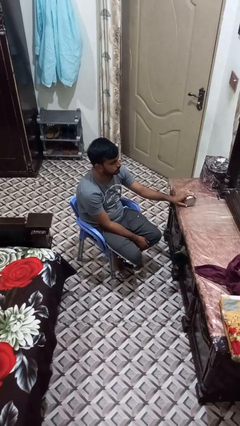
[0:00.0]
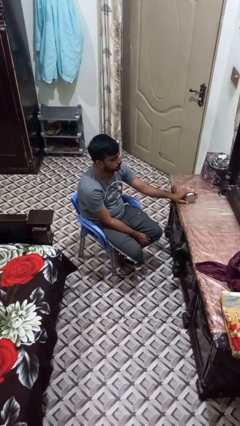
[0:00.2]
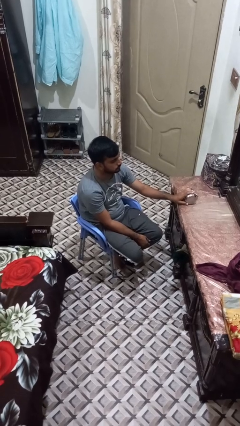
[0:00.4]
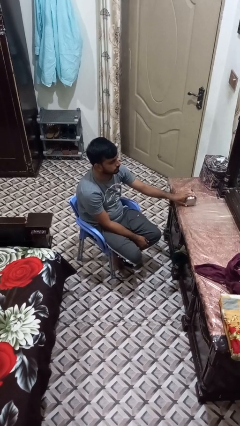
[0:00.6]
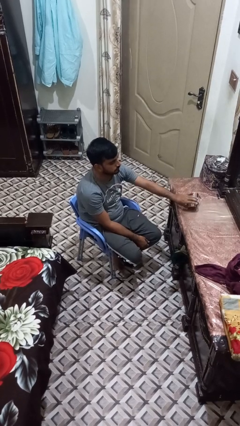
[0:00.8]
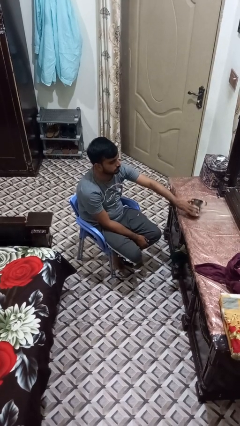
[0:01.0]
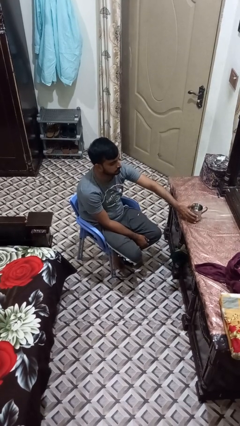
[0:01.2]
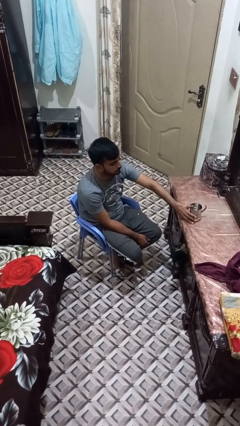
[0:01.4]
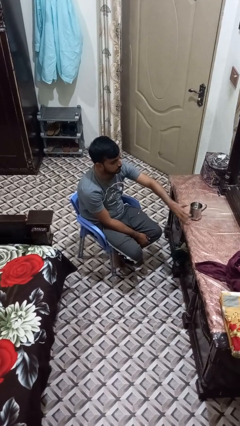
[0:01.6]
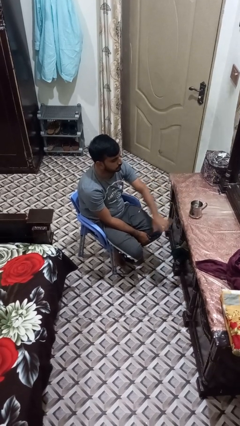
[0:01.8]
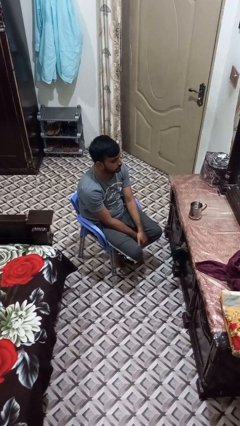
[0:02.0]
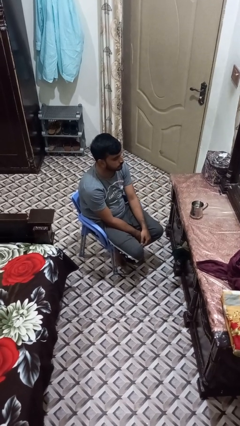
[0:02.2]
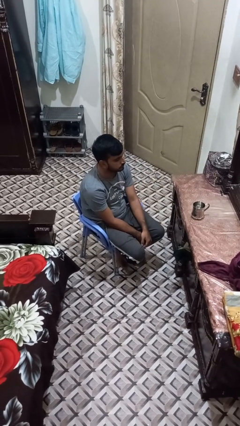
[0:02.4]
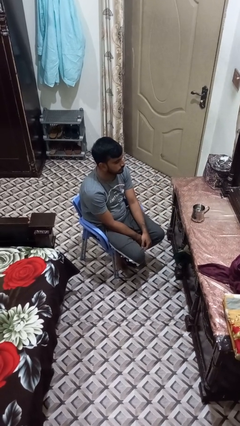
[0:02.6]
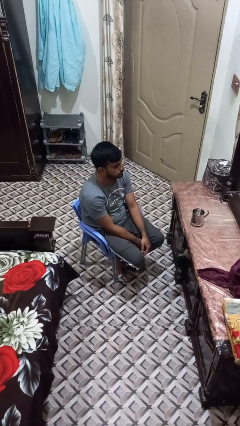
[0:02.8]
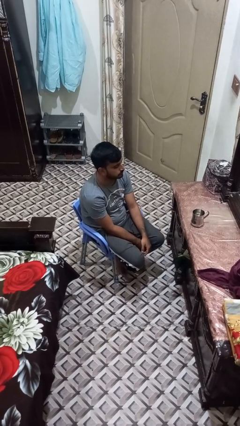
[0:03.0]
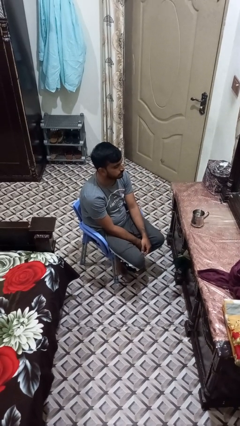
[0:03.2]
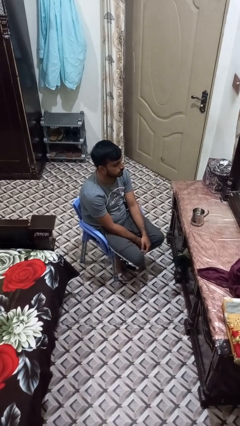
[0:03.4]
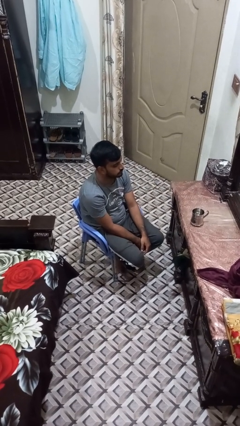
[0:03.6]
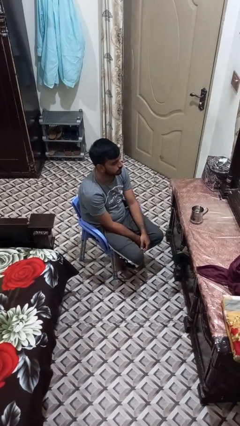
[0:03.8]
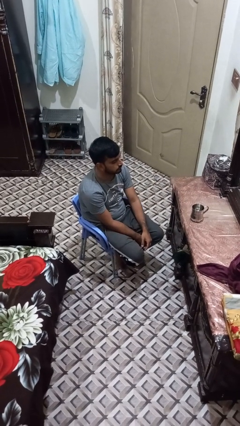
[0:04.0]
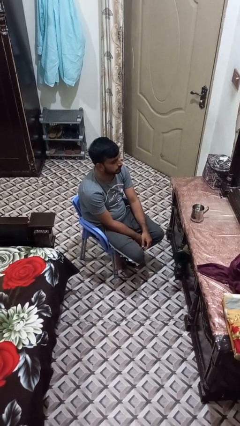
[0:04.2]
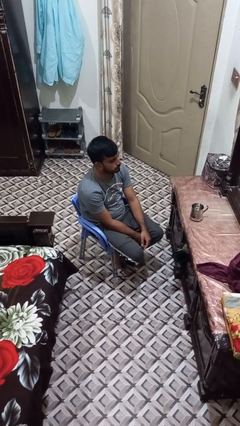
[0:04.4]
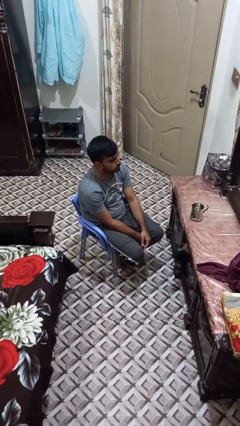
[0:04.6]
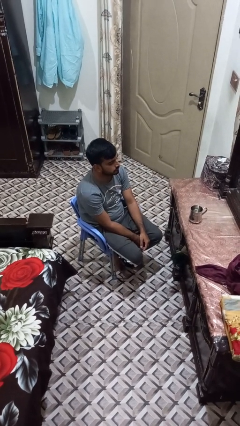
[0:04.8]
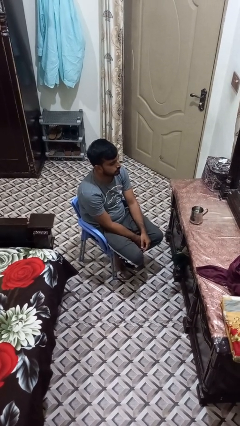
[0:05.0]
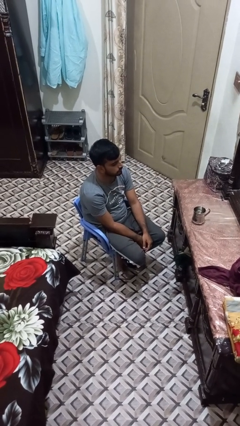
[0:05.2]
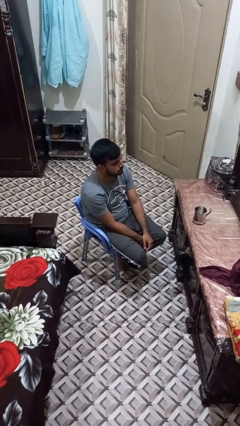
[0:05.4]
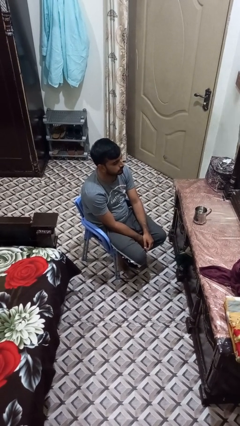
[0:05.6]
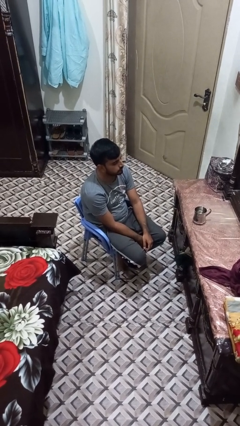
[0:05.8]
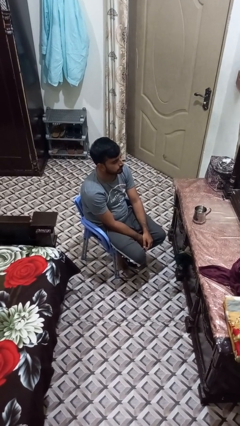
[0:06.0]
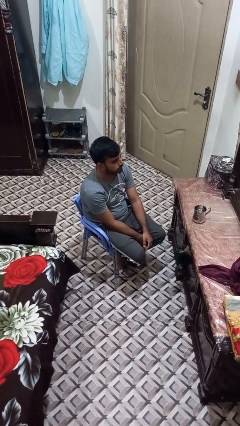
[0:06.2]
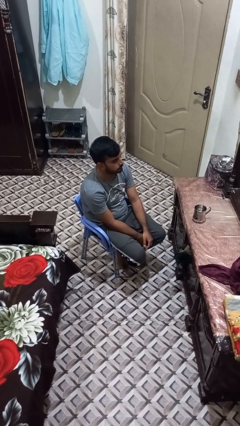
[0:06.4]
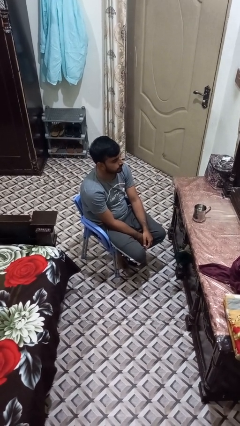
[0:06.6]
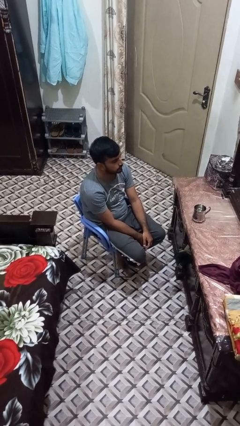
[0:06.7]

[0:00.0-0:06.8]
person sets upright glass

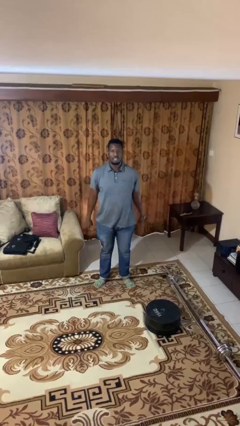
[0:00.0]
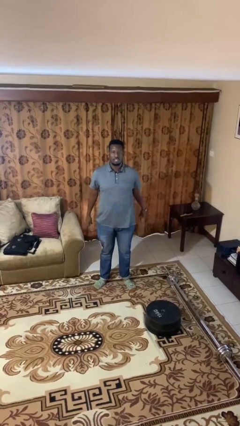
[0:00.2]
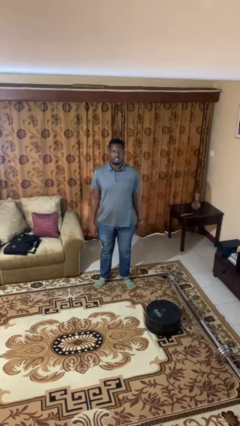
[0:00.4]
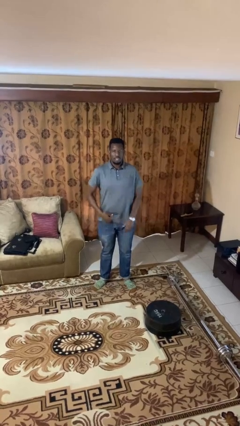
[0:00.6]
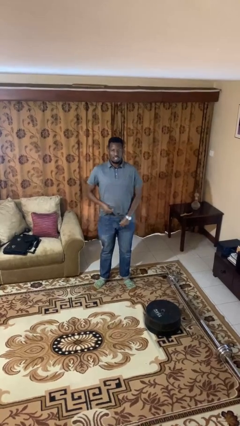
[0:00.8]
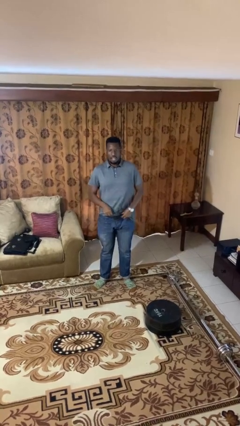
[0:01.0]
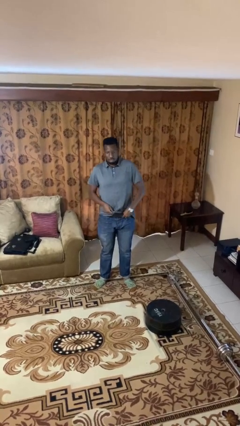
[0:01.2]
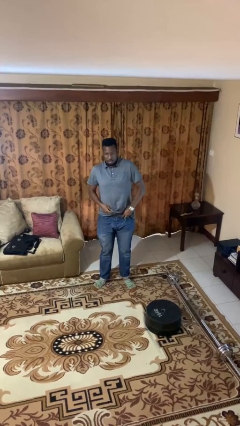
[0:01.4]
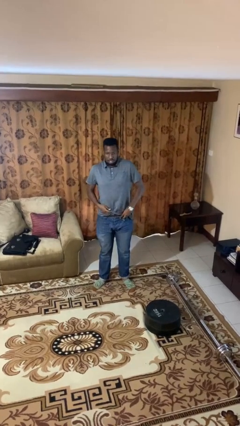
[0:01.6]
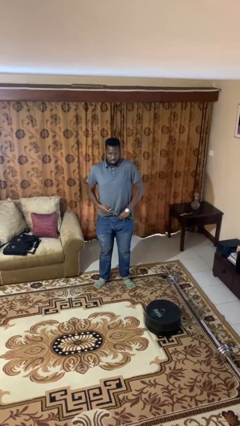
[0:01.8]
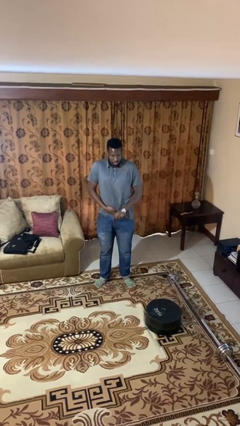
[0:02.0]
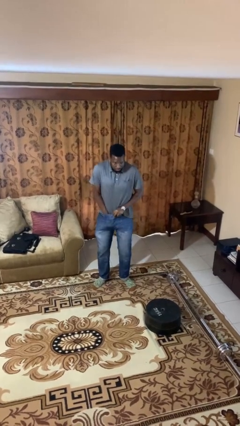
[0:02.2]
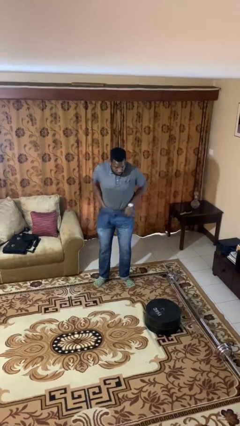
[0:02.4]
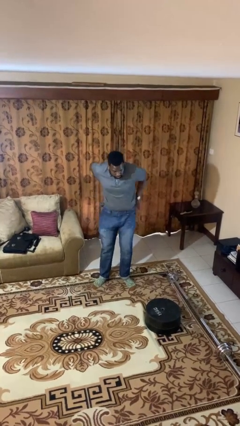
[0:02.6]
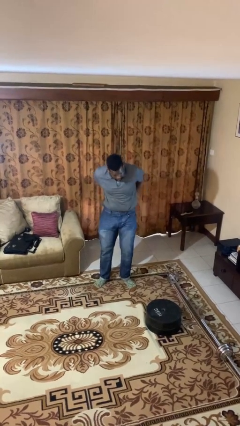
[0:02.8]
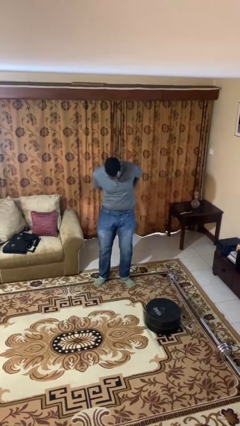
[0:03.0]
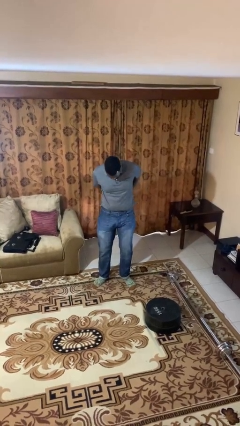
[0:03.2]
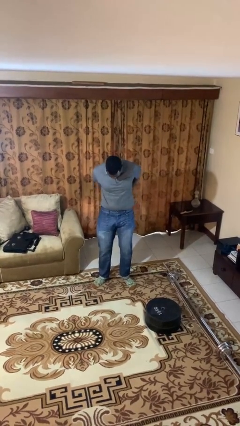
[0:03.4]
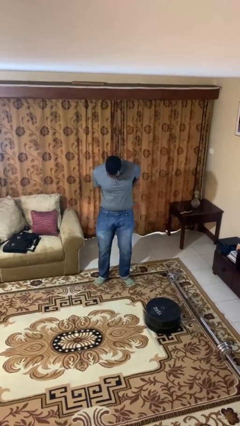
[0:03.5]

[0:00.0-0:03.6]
person tucks in shirt

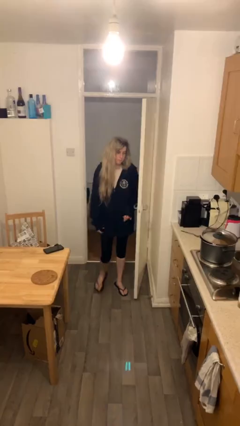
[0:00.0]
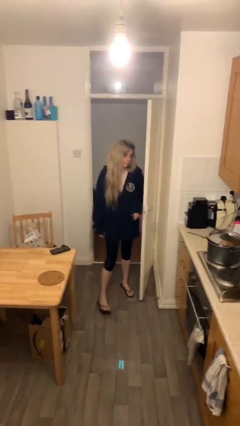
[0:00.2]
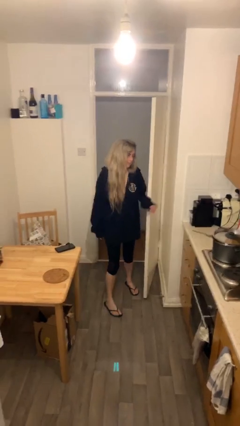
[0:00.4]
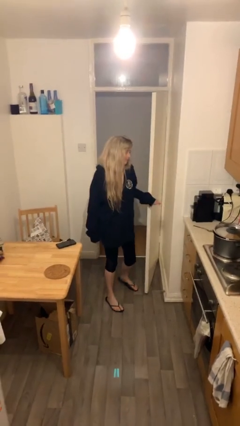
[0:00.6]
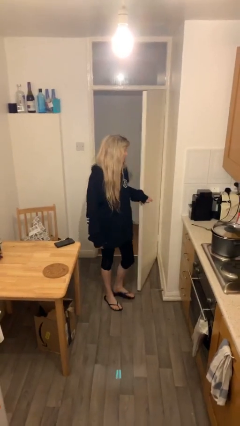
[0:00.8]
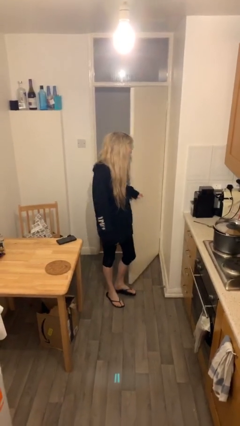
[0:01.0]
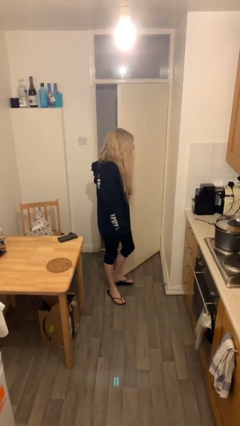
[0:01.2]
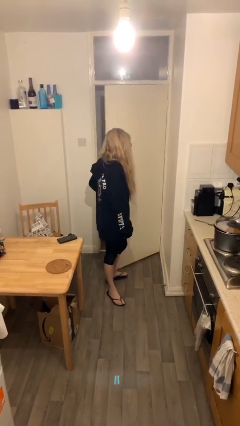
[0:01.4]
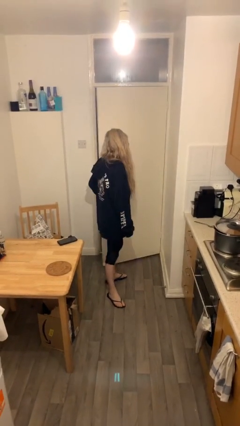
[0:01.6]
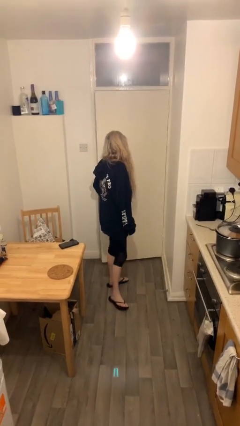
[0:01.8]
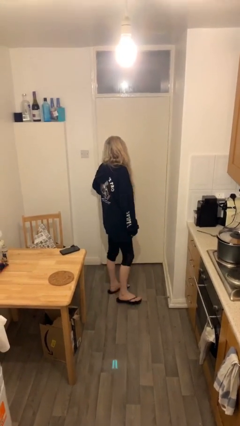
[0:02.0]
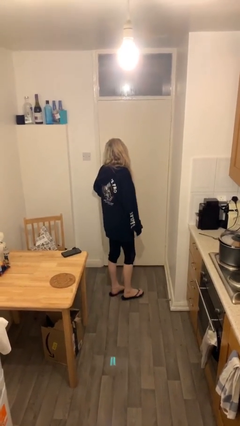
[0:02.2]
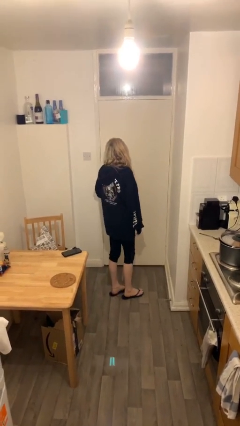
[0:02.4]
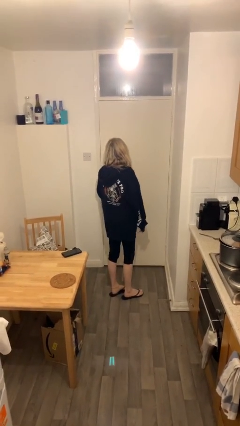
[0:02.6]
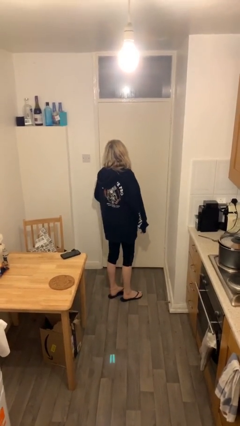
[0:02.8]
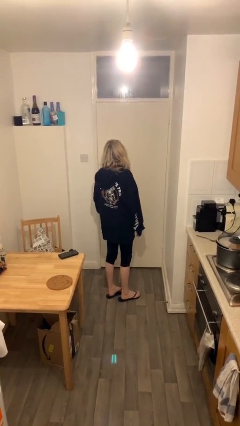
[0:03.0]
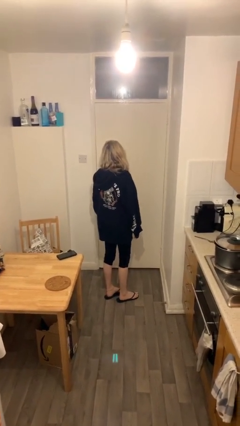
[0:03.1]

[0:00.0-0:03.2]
person closes facility door

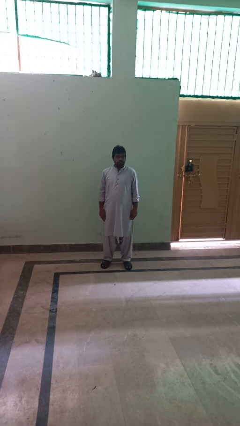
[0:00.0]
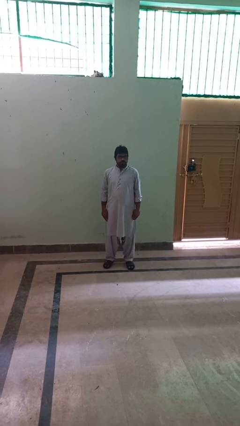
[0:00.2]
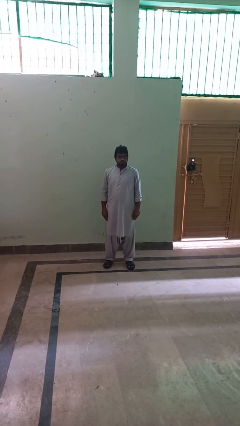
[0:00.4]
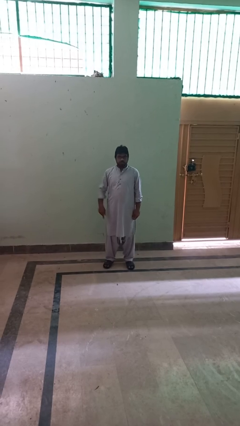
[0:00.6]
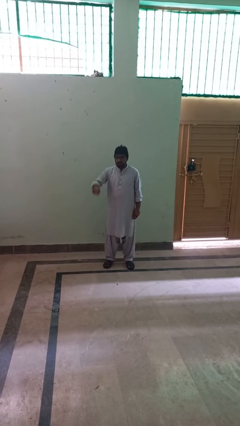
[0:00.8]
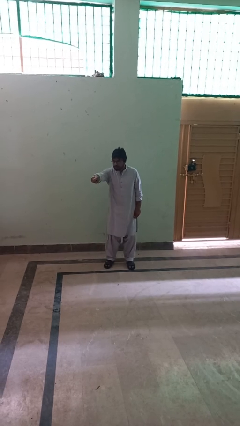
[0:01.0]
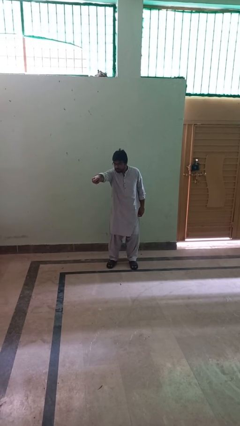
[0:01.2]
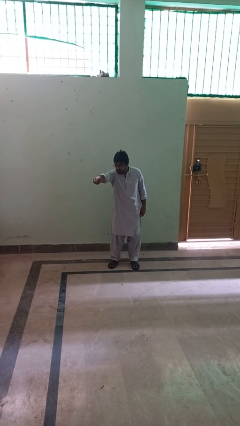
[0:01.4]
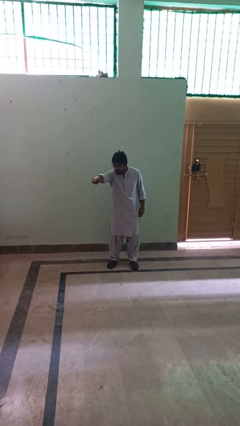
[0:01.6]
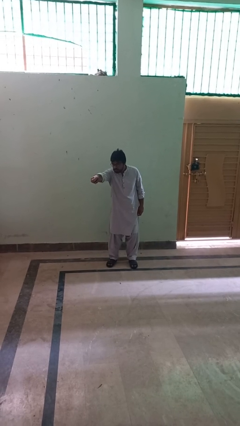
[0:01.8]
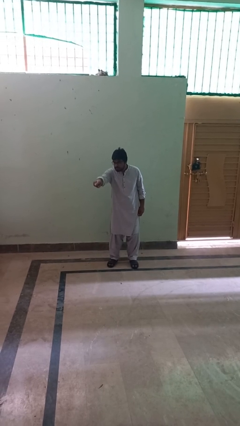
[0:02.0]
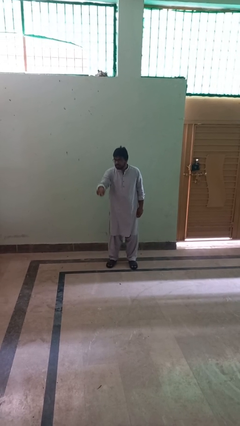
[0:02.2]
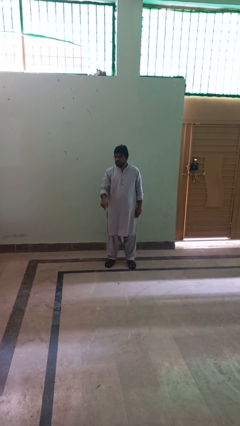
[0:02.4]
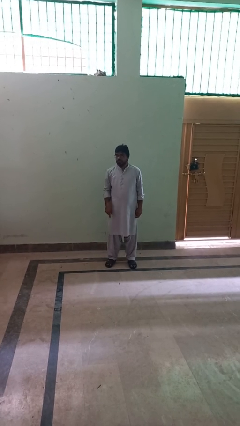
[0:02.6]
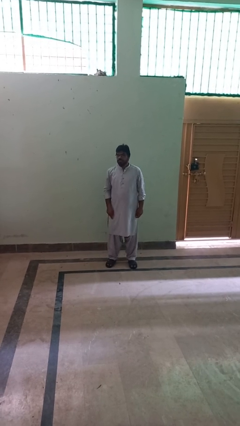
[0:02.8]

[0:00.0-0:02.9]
person points at person

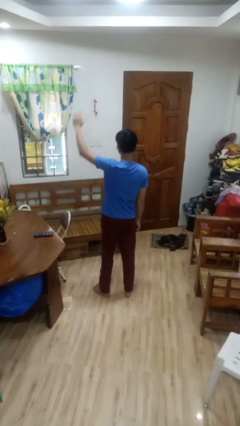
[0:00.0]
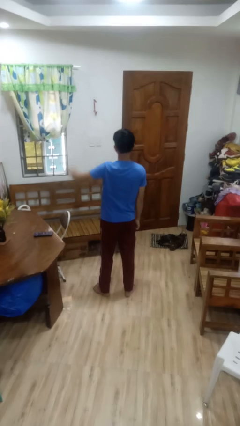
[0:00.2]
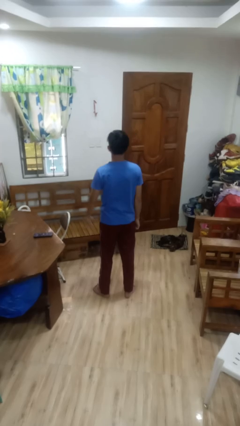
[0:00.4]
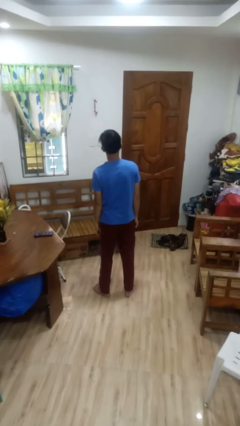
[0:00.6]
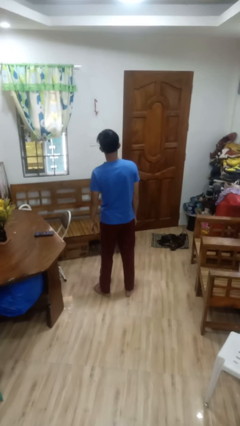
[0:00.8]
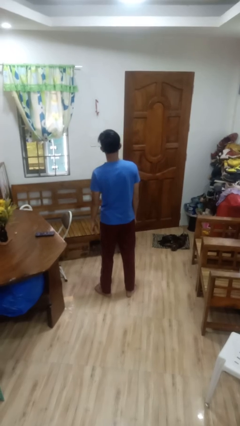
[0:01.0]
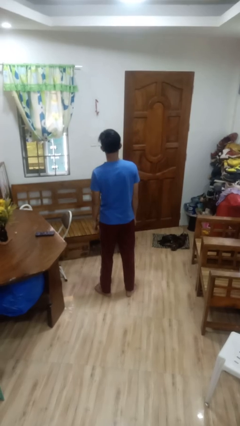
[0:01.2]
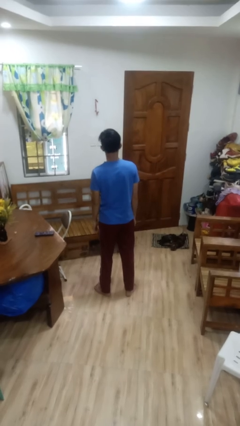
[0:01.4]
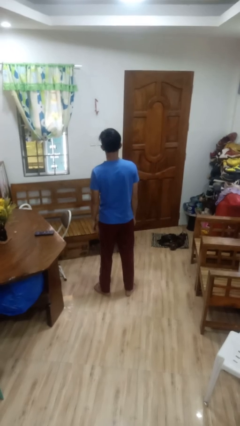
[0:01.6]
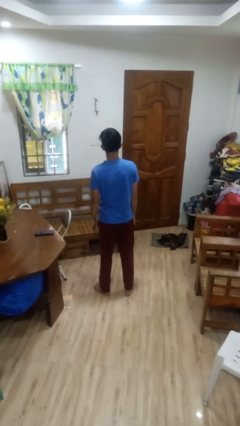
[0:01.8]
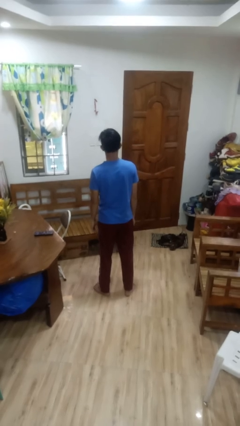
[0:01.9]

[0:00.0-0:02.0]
person gestures lower hand
